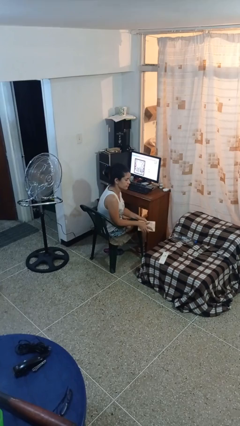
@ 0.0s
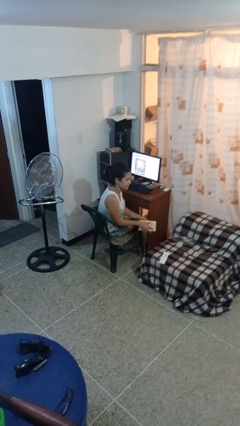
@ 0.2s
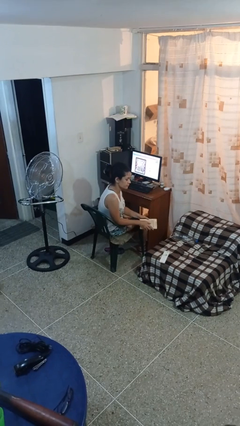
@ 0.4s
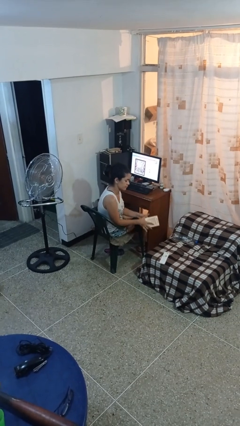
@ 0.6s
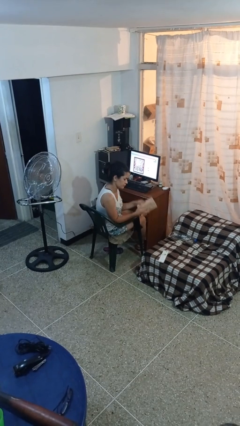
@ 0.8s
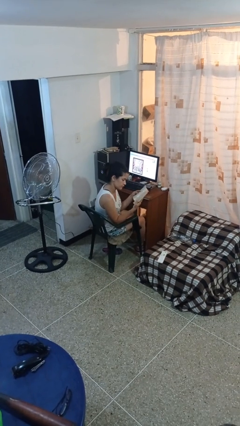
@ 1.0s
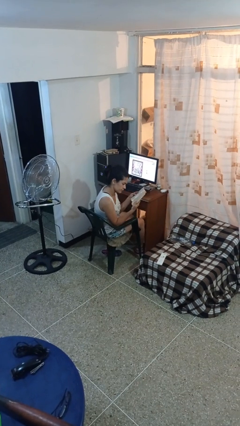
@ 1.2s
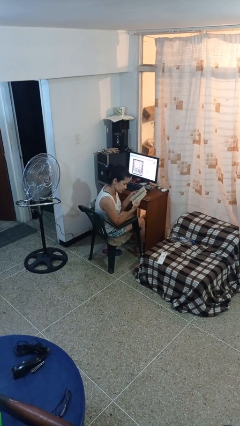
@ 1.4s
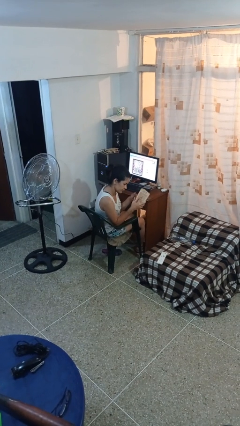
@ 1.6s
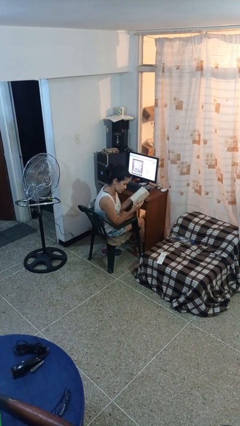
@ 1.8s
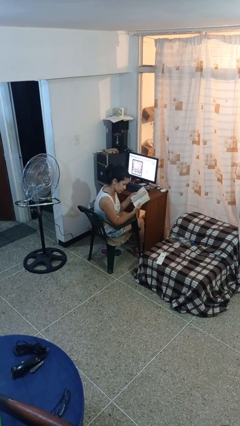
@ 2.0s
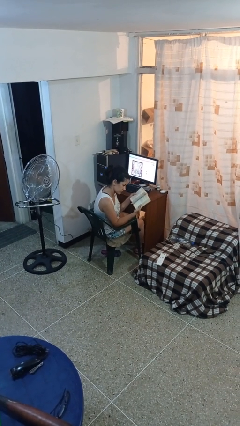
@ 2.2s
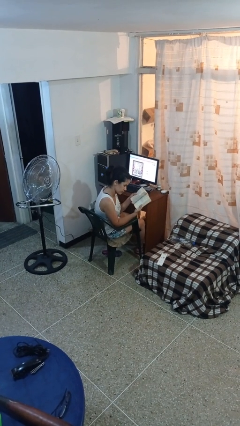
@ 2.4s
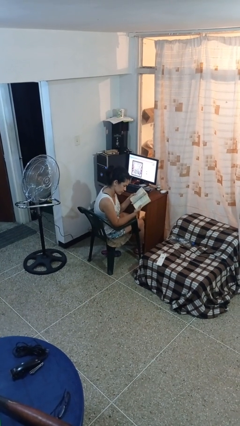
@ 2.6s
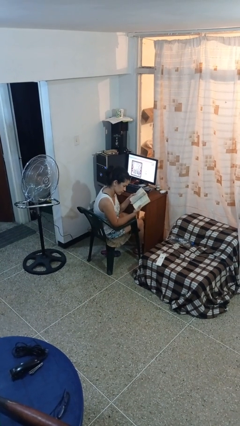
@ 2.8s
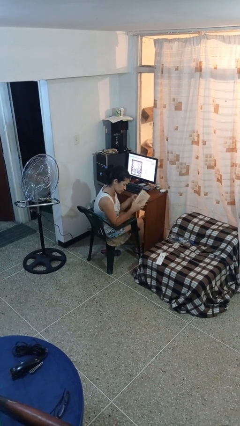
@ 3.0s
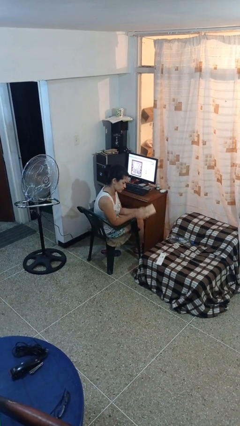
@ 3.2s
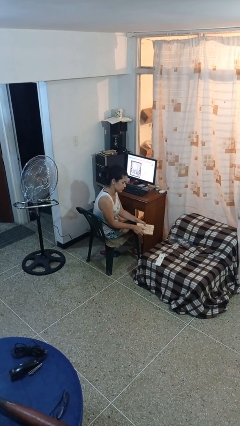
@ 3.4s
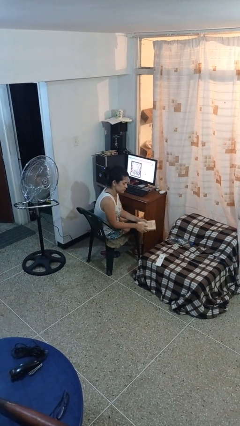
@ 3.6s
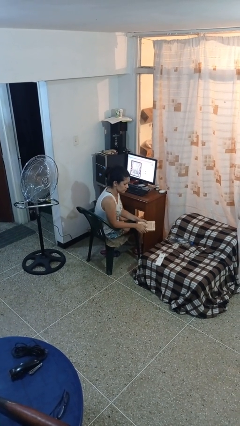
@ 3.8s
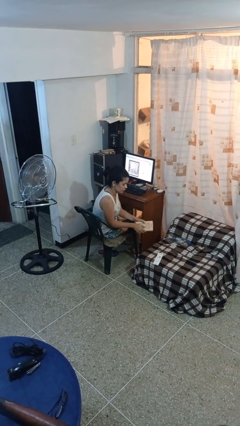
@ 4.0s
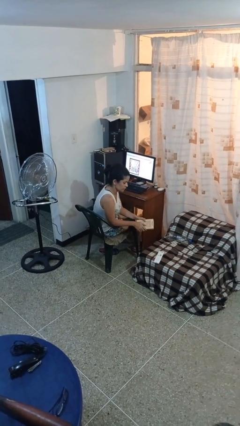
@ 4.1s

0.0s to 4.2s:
person reads book

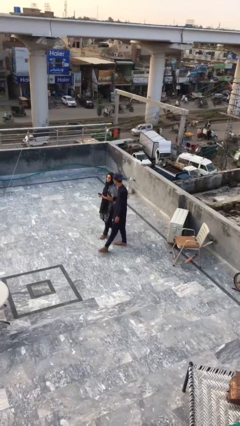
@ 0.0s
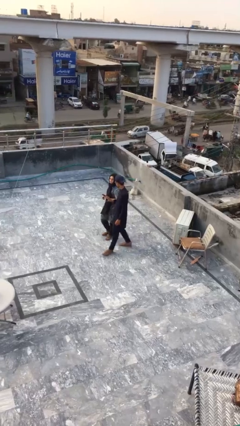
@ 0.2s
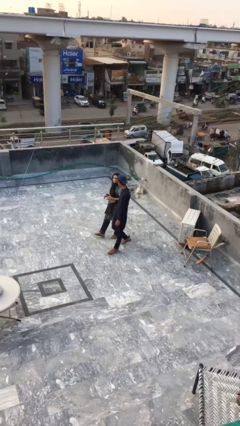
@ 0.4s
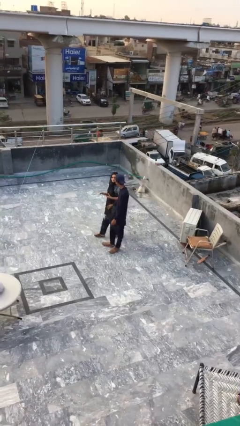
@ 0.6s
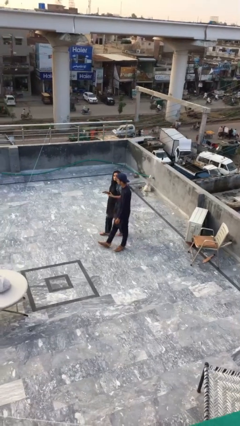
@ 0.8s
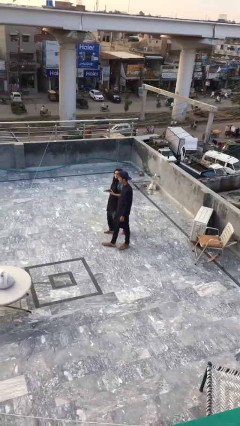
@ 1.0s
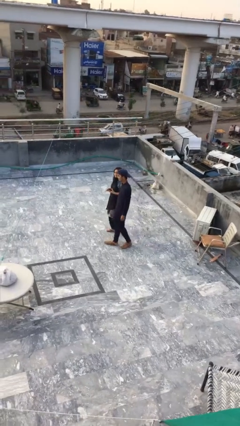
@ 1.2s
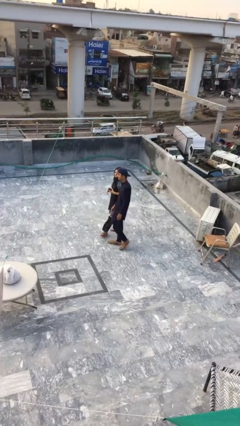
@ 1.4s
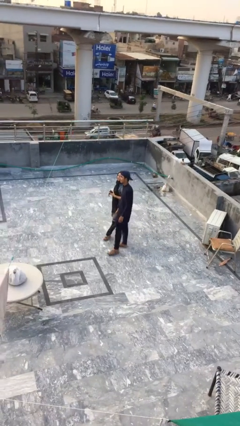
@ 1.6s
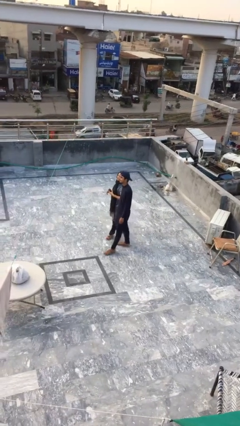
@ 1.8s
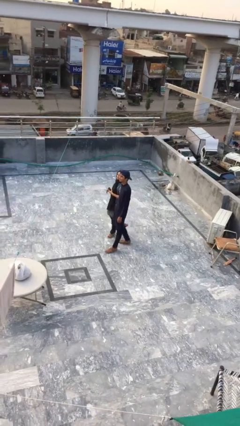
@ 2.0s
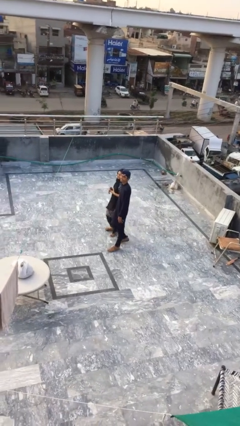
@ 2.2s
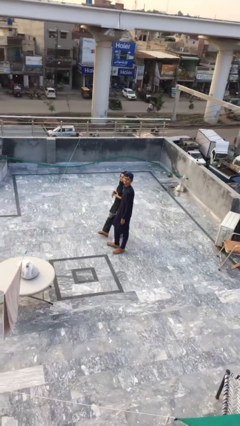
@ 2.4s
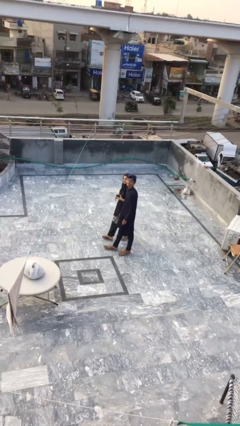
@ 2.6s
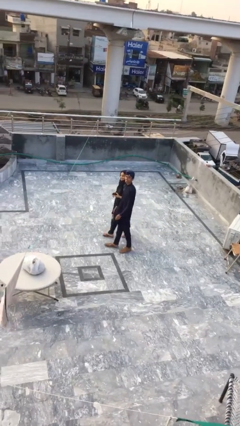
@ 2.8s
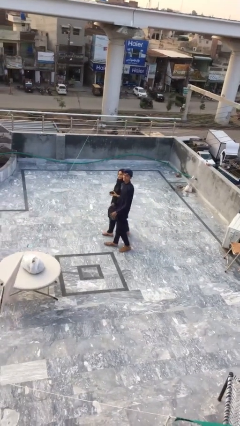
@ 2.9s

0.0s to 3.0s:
person talks to person

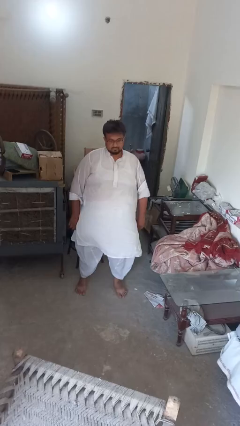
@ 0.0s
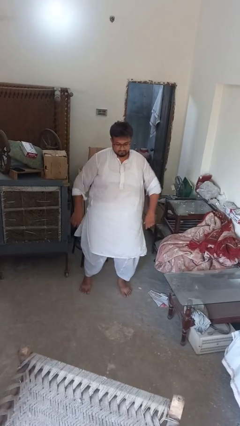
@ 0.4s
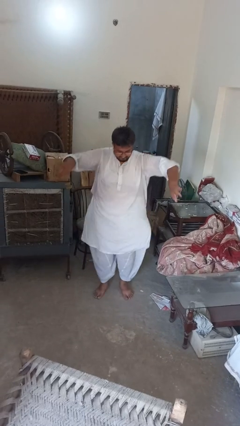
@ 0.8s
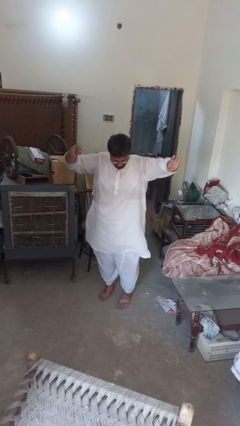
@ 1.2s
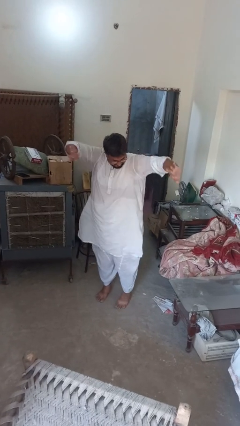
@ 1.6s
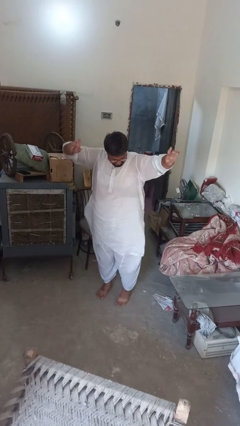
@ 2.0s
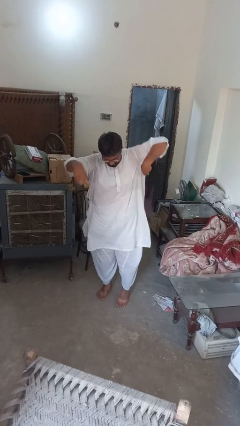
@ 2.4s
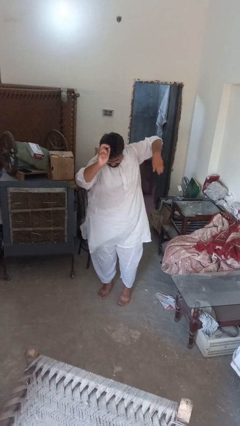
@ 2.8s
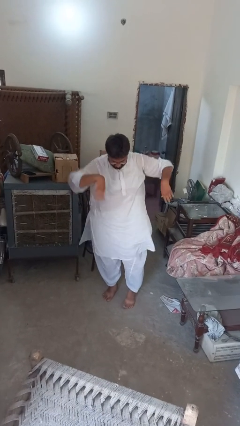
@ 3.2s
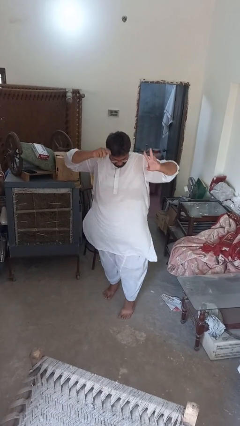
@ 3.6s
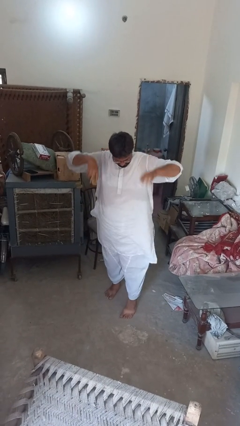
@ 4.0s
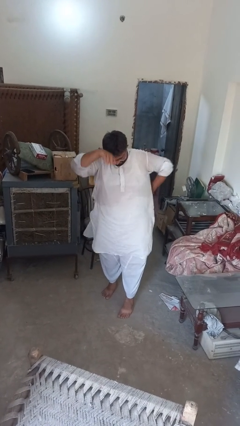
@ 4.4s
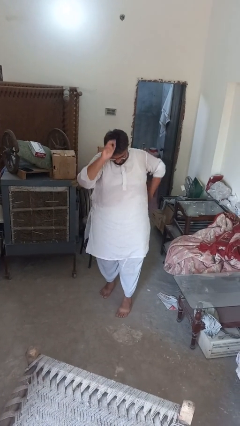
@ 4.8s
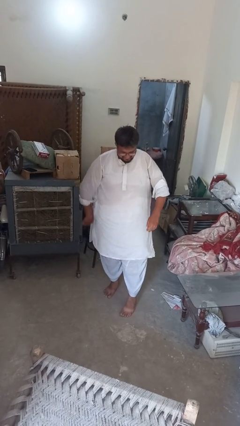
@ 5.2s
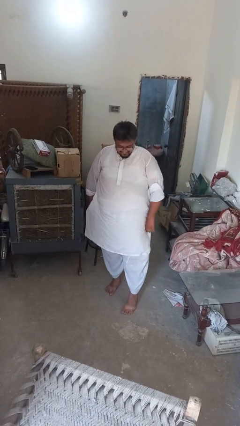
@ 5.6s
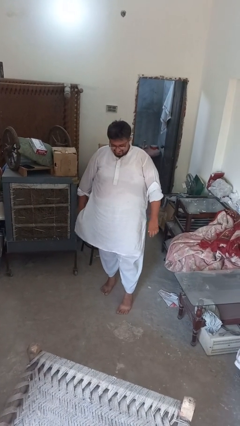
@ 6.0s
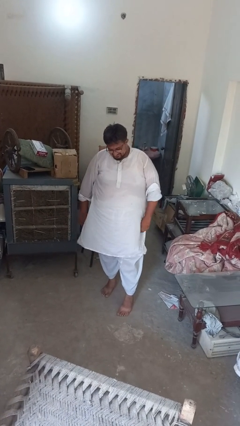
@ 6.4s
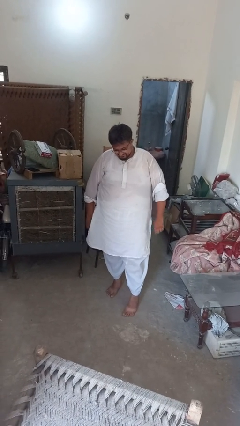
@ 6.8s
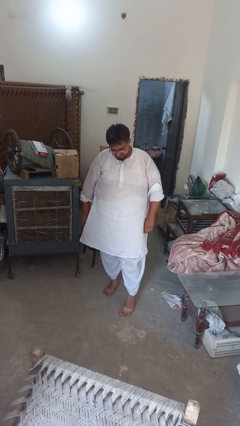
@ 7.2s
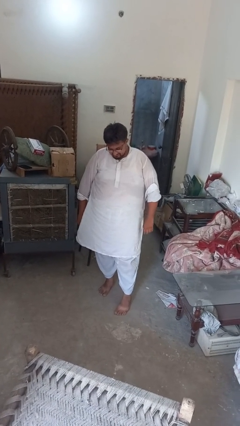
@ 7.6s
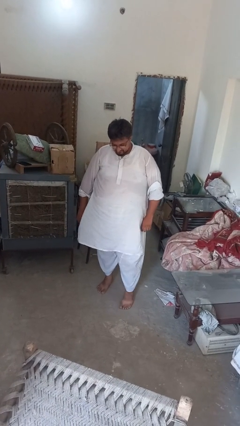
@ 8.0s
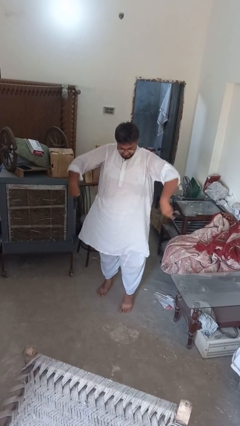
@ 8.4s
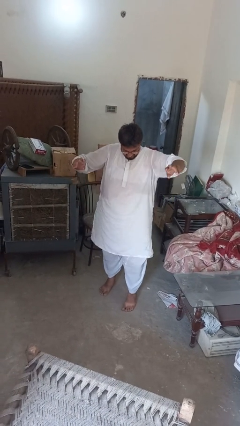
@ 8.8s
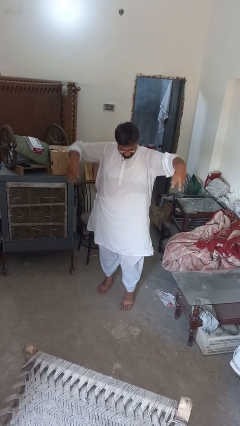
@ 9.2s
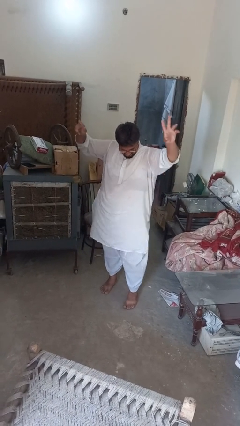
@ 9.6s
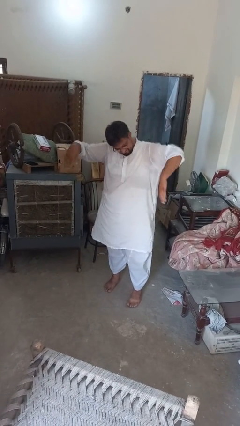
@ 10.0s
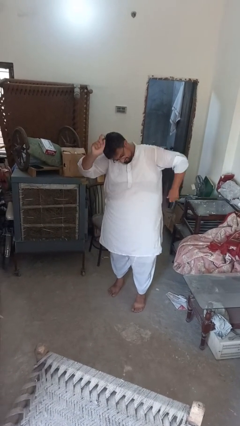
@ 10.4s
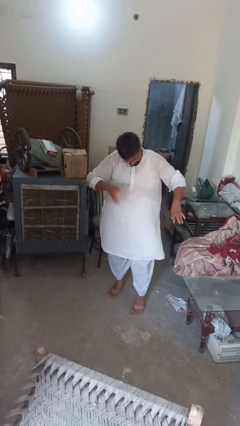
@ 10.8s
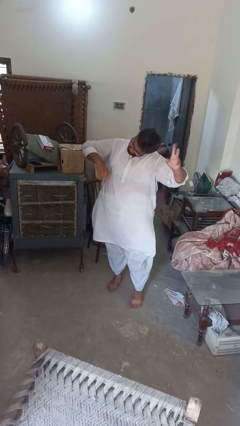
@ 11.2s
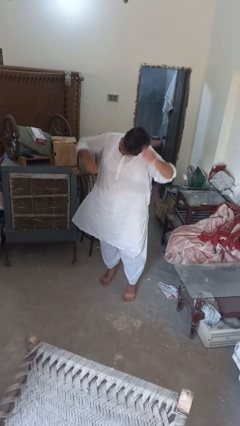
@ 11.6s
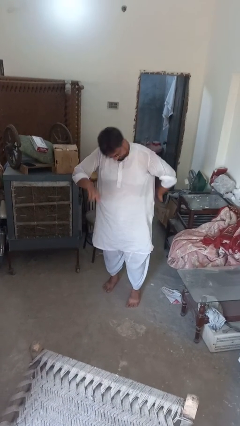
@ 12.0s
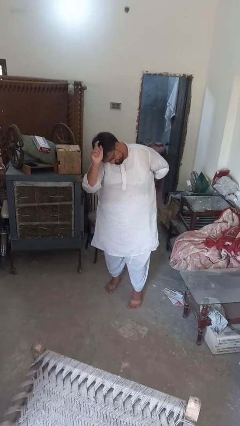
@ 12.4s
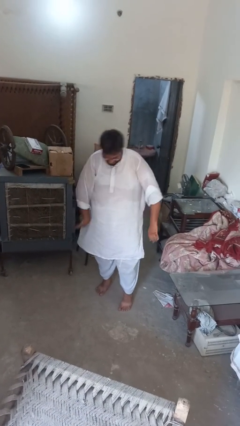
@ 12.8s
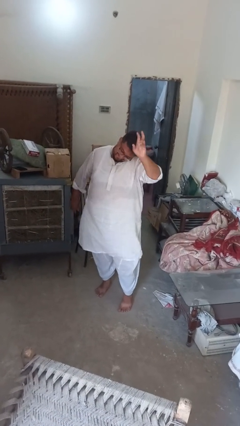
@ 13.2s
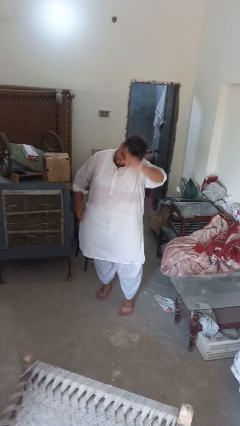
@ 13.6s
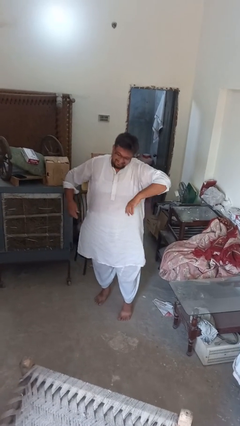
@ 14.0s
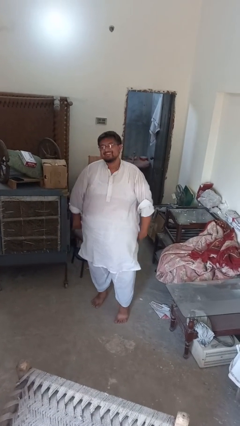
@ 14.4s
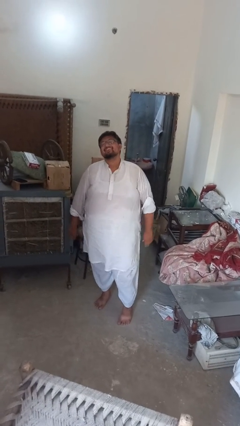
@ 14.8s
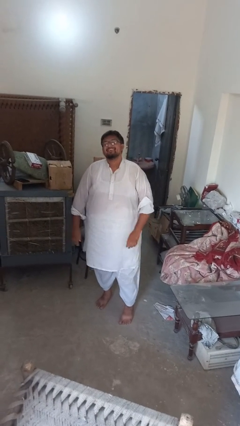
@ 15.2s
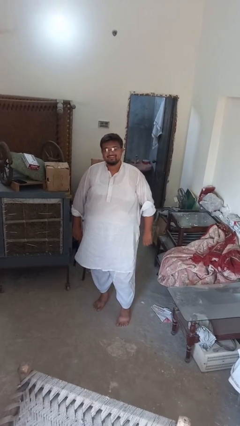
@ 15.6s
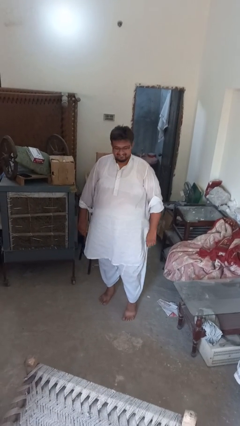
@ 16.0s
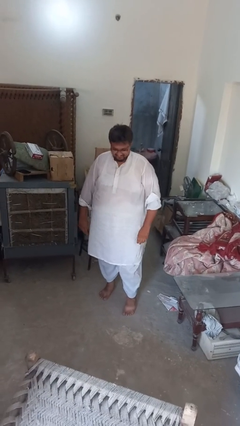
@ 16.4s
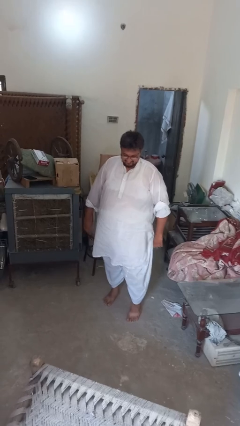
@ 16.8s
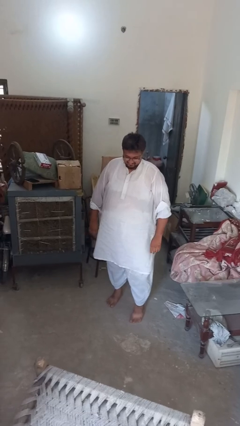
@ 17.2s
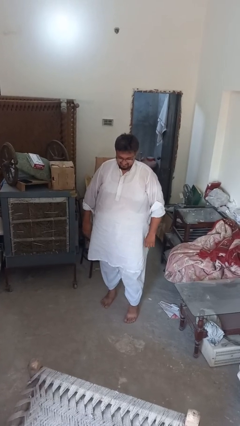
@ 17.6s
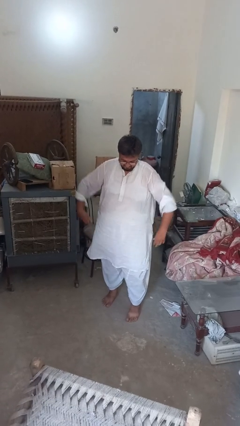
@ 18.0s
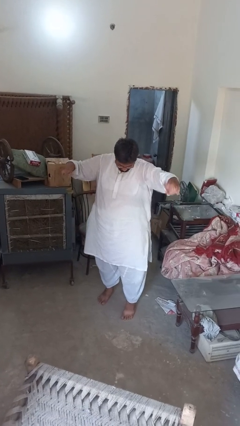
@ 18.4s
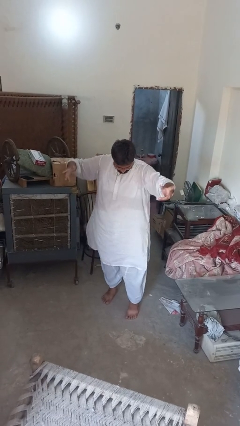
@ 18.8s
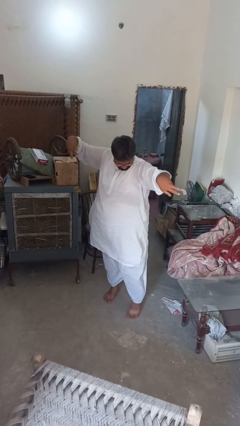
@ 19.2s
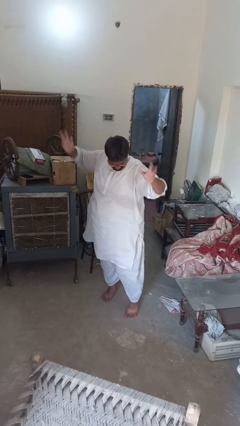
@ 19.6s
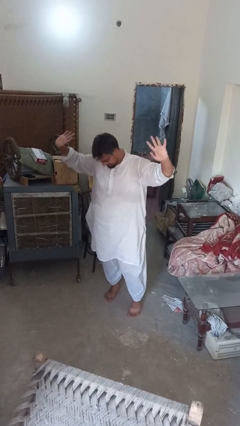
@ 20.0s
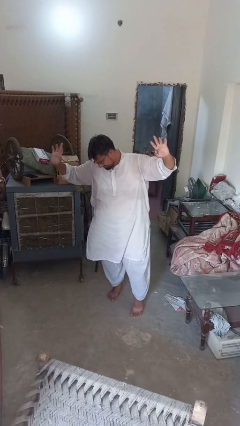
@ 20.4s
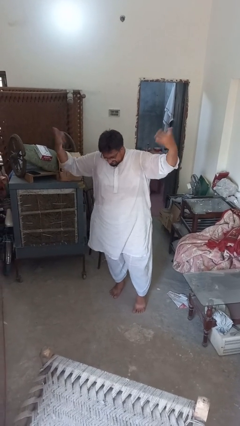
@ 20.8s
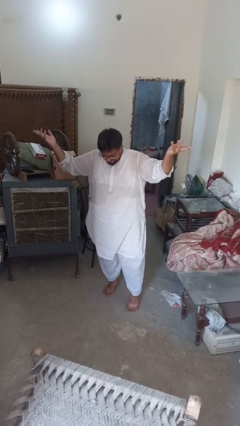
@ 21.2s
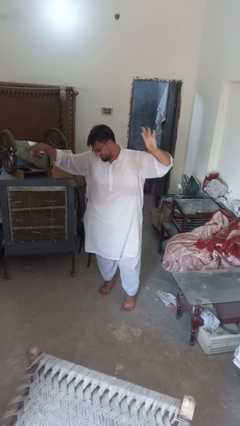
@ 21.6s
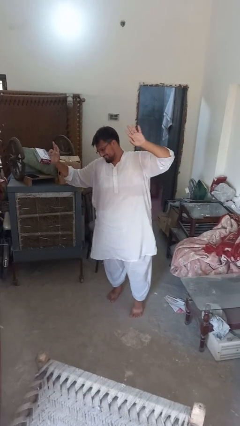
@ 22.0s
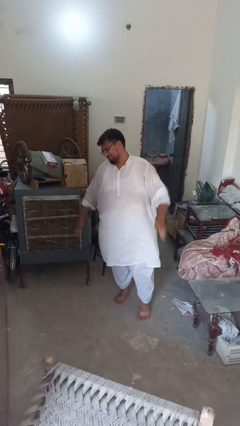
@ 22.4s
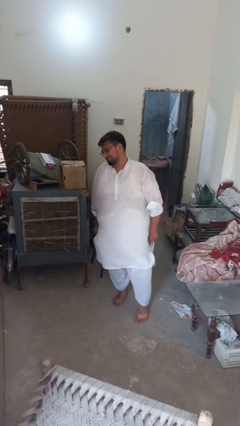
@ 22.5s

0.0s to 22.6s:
person dances in place
